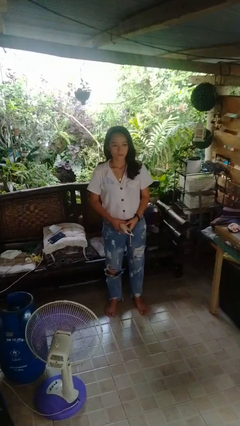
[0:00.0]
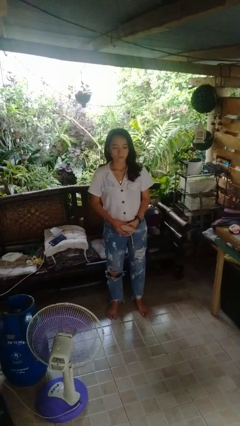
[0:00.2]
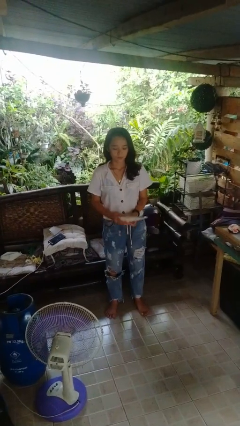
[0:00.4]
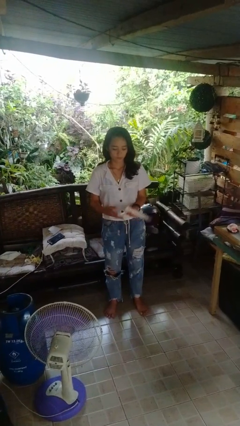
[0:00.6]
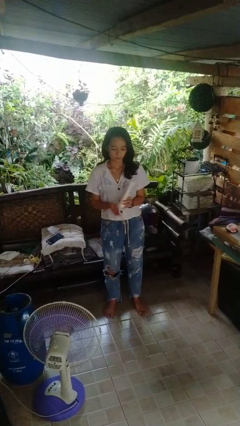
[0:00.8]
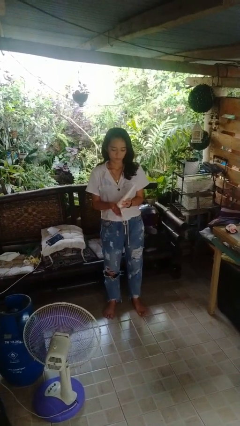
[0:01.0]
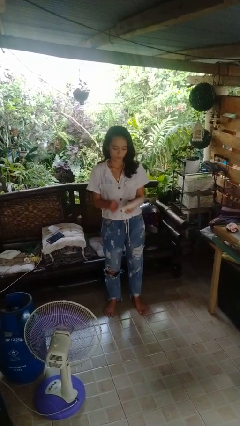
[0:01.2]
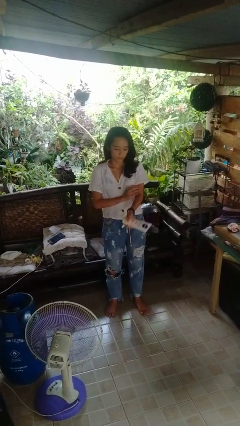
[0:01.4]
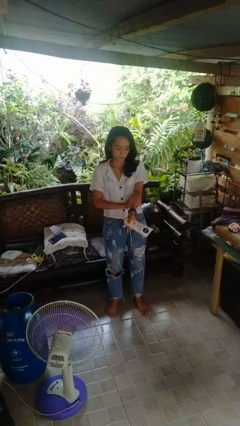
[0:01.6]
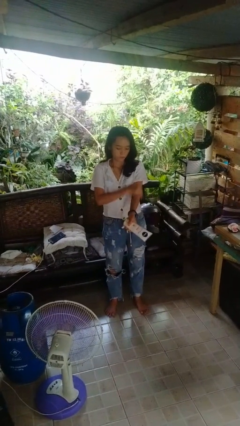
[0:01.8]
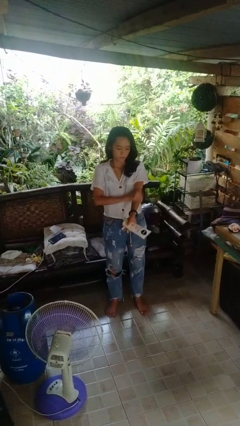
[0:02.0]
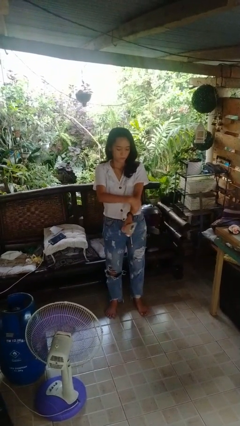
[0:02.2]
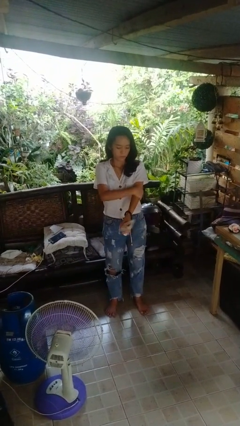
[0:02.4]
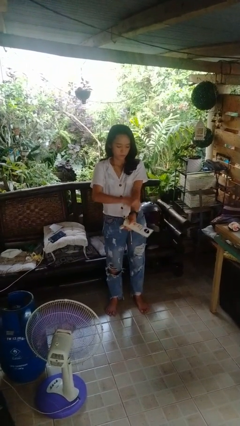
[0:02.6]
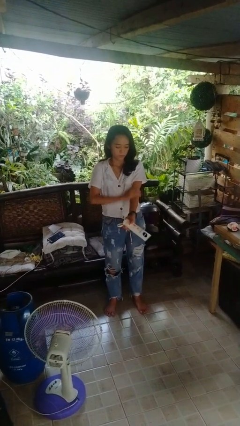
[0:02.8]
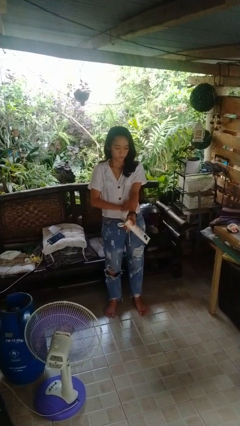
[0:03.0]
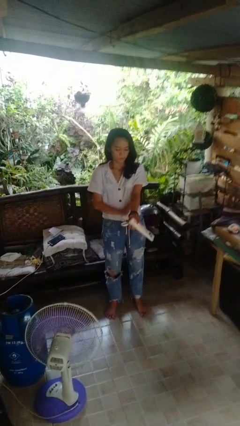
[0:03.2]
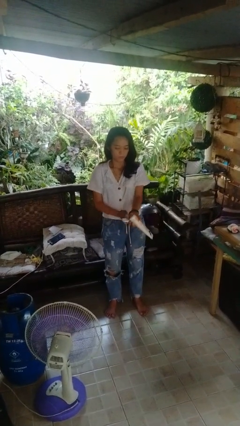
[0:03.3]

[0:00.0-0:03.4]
person applies sunscreen

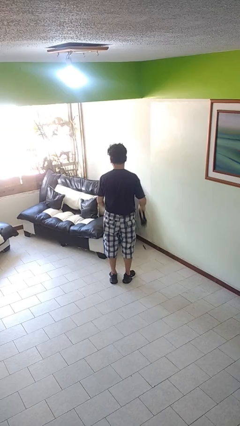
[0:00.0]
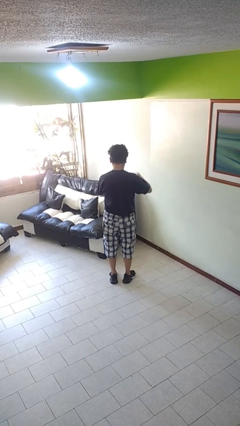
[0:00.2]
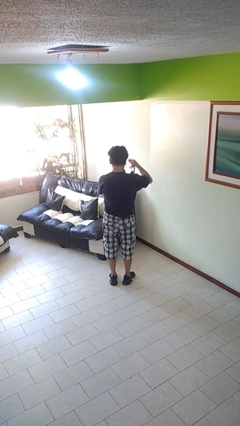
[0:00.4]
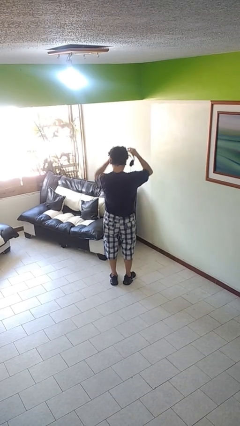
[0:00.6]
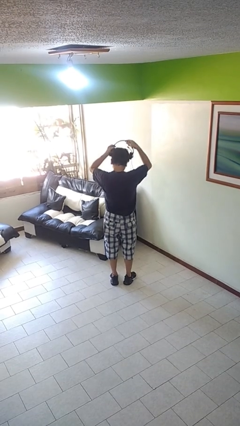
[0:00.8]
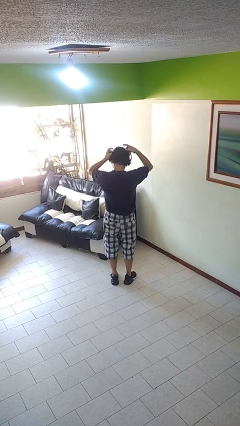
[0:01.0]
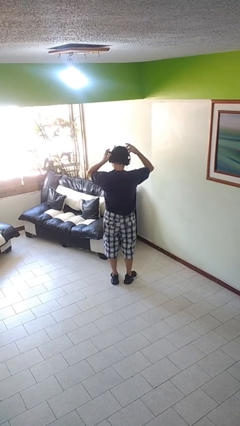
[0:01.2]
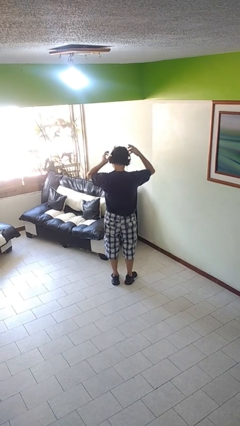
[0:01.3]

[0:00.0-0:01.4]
person puts on headphones

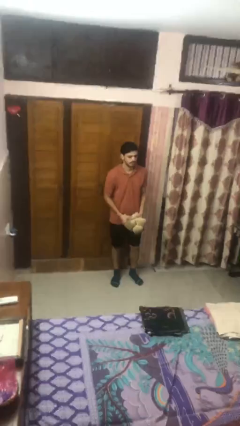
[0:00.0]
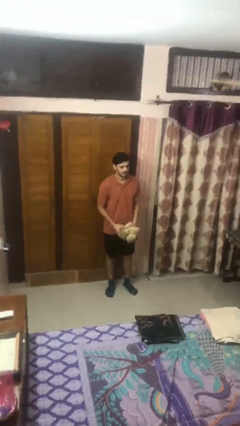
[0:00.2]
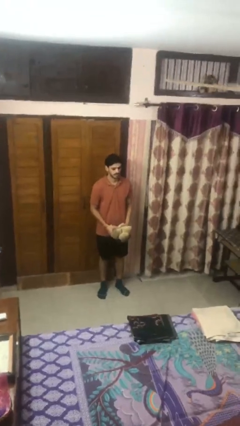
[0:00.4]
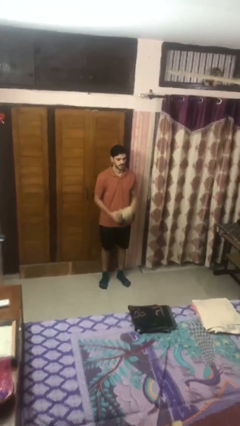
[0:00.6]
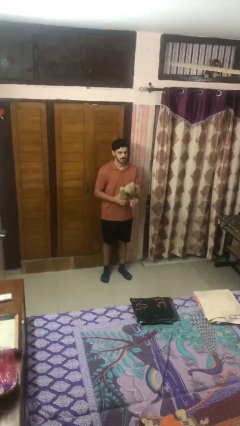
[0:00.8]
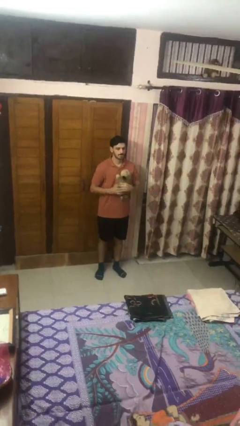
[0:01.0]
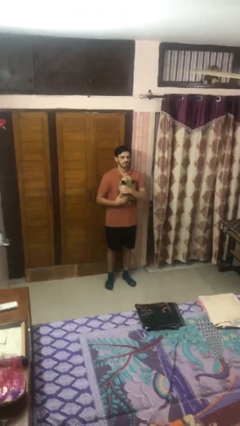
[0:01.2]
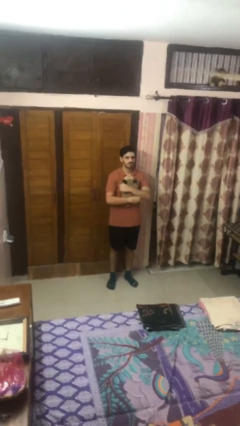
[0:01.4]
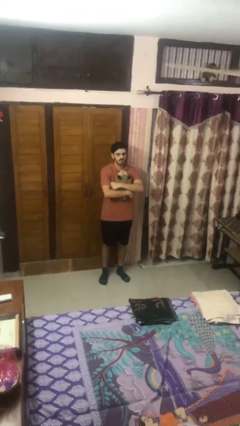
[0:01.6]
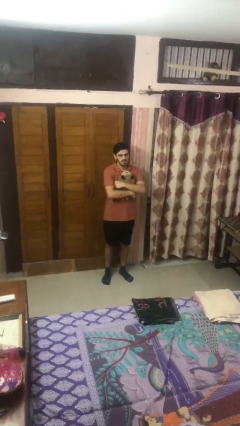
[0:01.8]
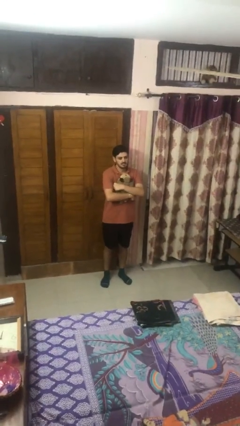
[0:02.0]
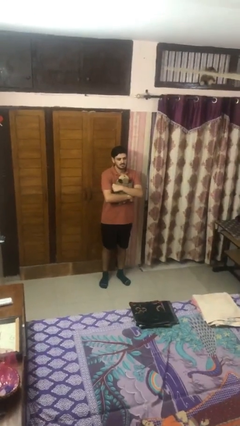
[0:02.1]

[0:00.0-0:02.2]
person hugs stuffed animal

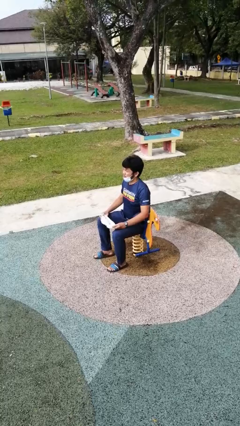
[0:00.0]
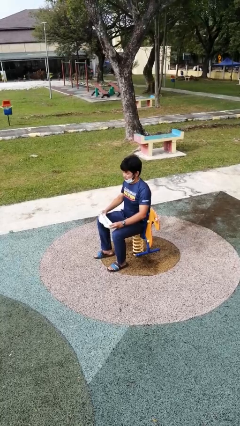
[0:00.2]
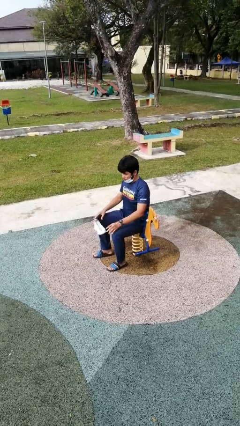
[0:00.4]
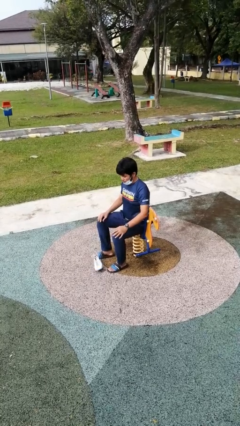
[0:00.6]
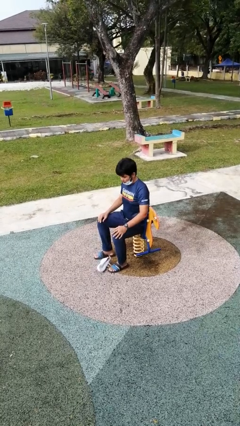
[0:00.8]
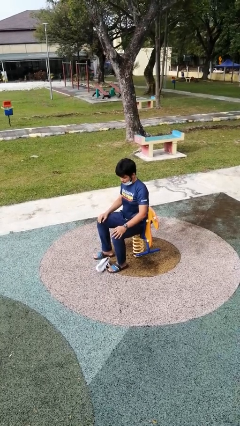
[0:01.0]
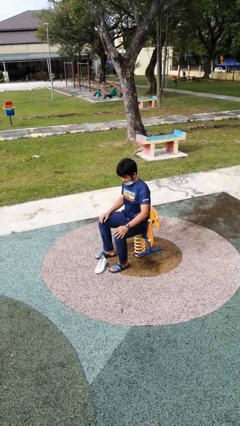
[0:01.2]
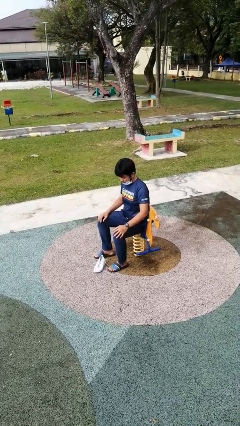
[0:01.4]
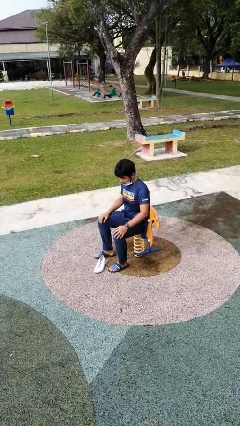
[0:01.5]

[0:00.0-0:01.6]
person drops object

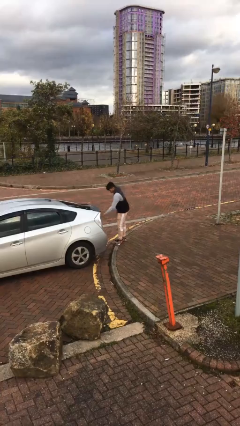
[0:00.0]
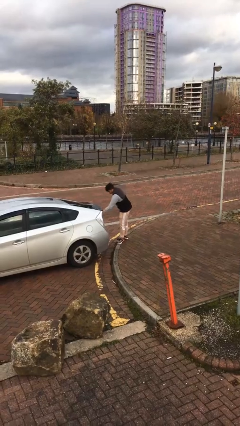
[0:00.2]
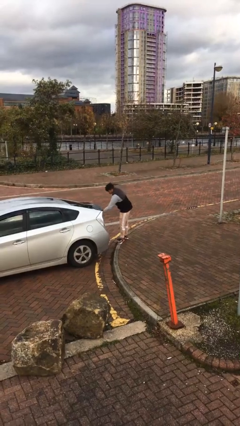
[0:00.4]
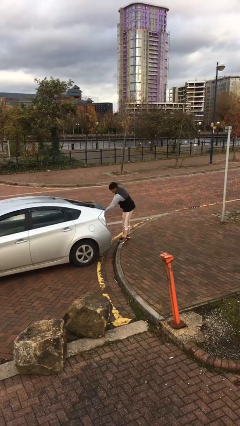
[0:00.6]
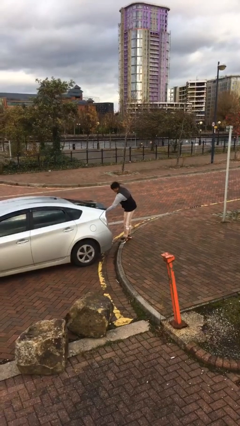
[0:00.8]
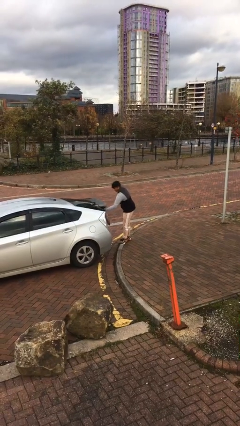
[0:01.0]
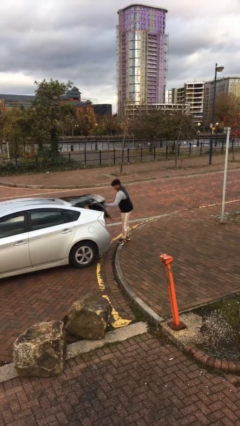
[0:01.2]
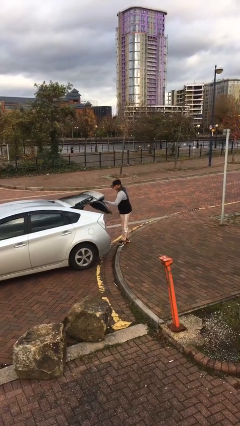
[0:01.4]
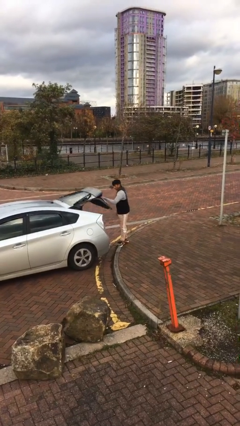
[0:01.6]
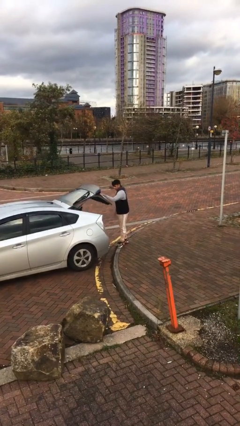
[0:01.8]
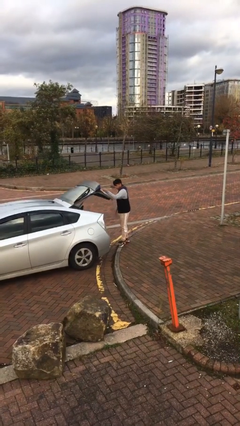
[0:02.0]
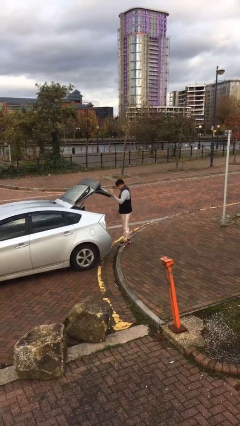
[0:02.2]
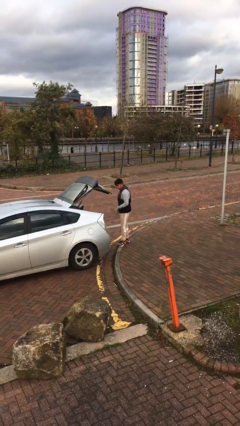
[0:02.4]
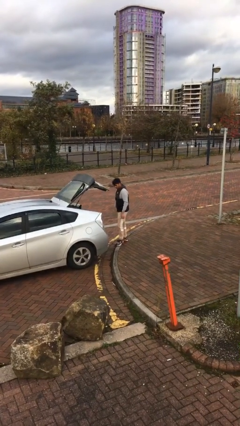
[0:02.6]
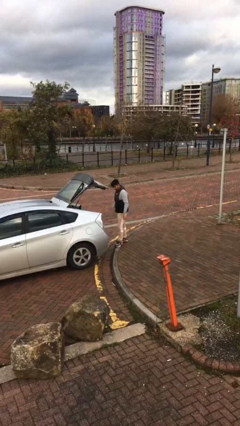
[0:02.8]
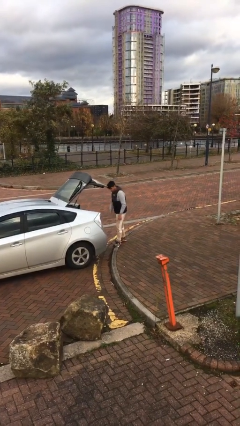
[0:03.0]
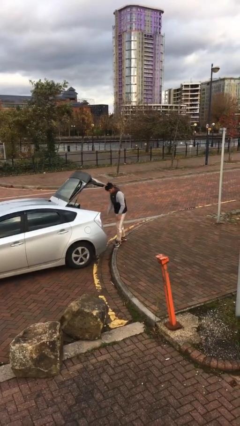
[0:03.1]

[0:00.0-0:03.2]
person opens car trunk

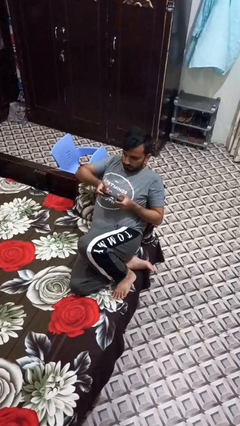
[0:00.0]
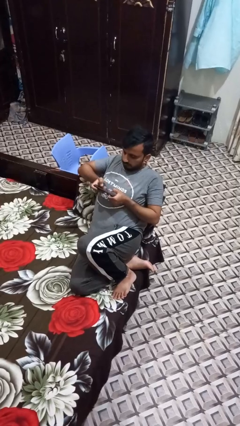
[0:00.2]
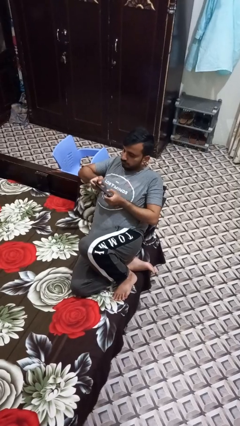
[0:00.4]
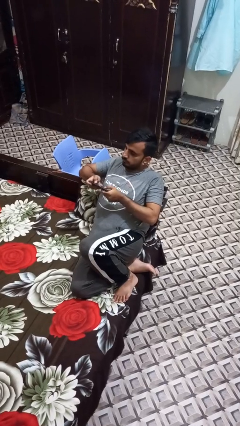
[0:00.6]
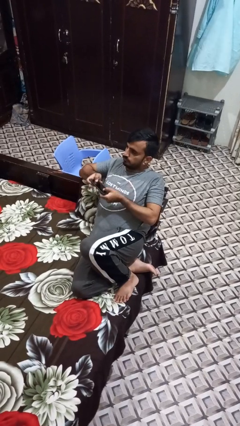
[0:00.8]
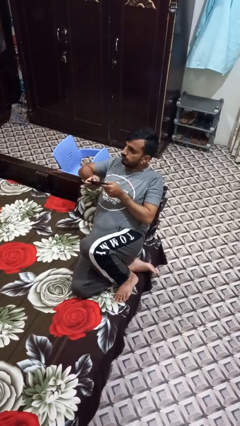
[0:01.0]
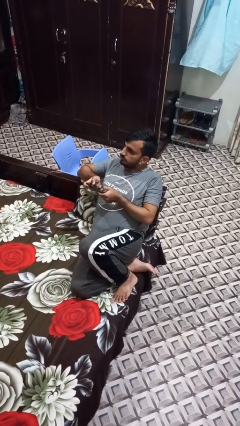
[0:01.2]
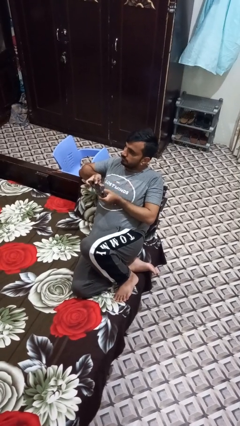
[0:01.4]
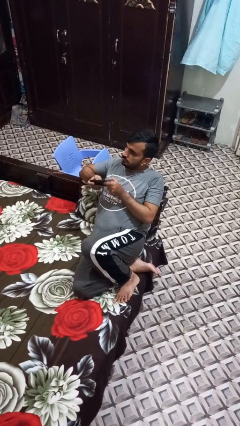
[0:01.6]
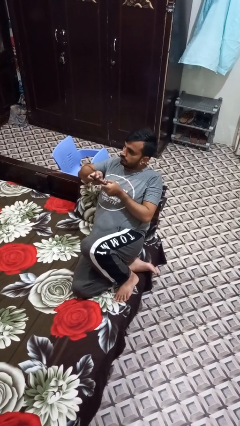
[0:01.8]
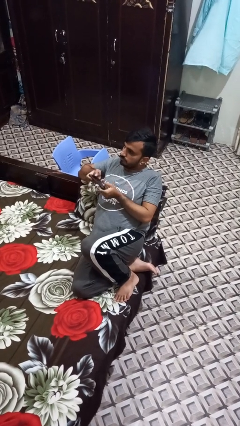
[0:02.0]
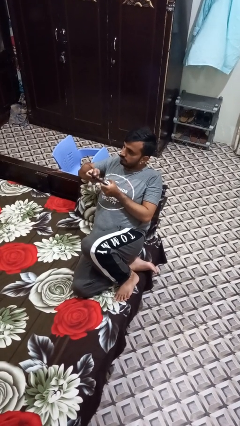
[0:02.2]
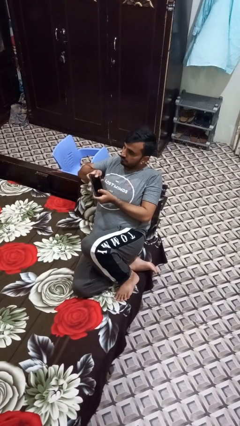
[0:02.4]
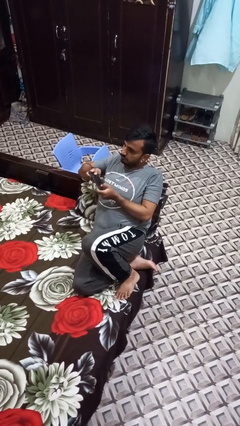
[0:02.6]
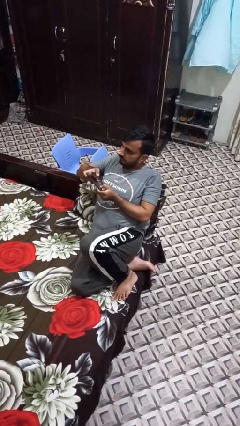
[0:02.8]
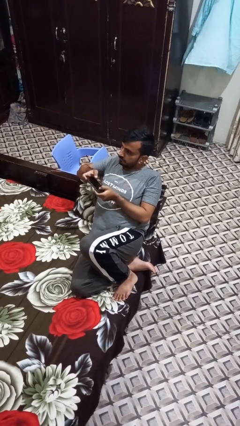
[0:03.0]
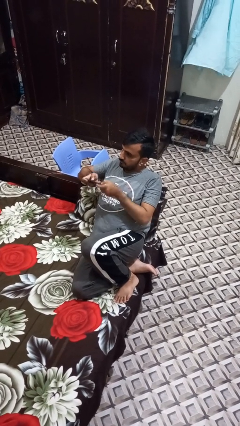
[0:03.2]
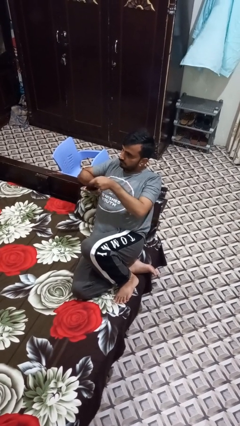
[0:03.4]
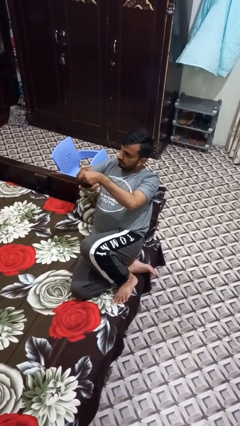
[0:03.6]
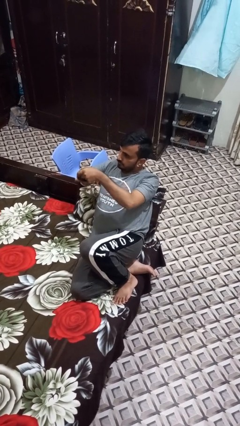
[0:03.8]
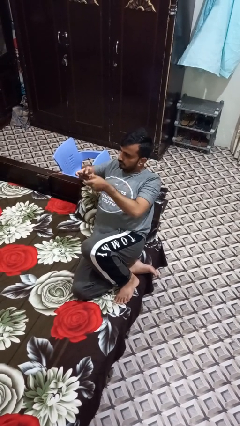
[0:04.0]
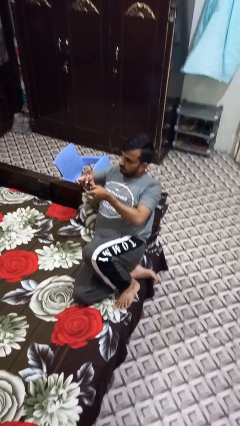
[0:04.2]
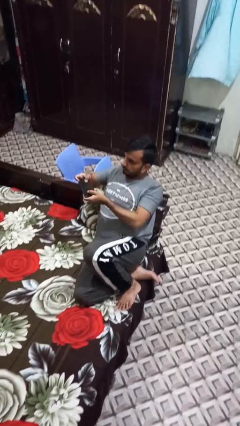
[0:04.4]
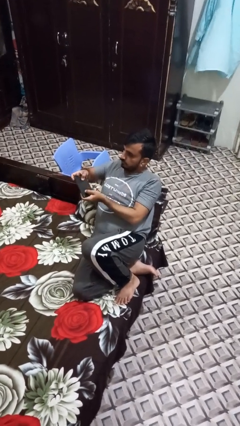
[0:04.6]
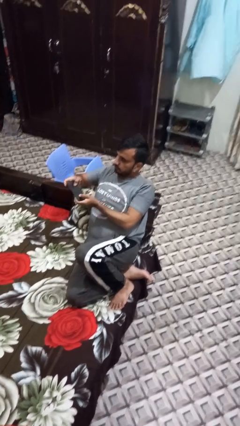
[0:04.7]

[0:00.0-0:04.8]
person interacts with handheld game

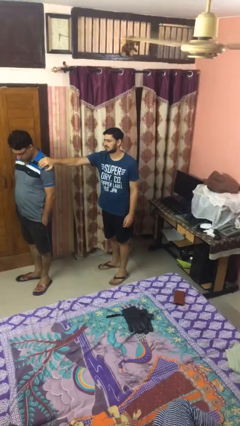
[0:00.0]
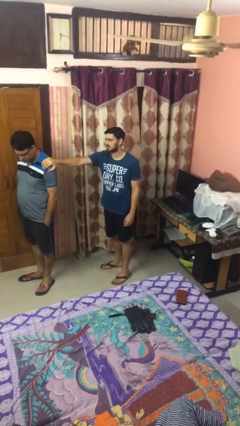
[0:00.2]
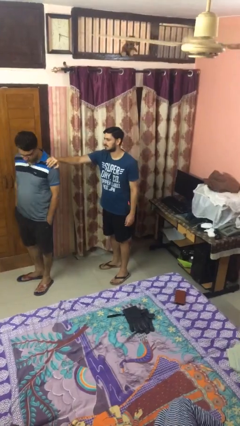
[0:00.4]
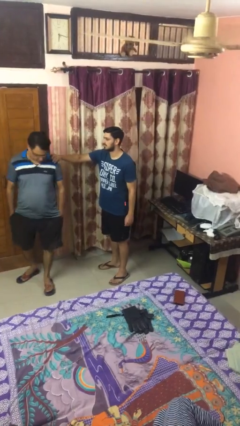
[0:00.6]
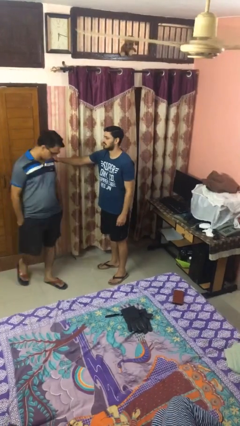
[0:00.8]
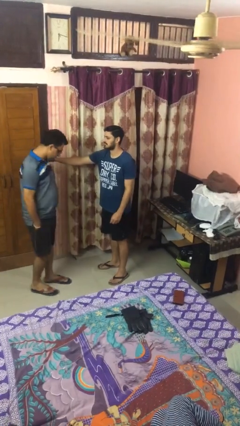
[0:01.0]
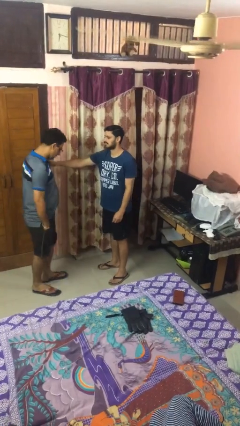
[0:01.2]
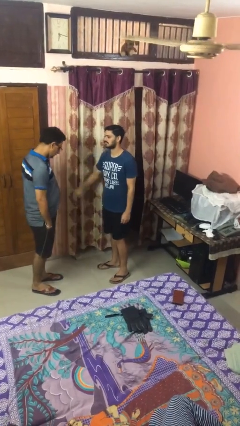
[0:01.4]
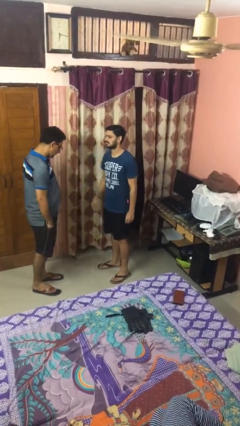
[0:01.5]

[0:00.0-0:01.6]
person spins person around
